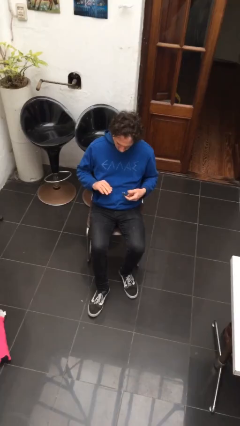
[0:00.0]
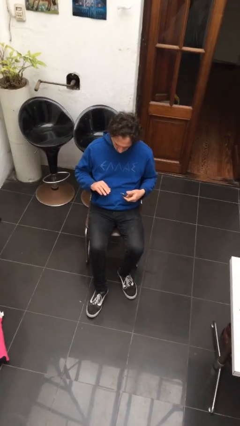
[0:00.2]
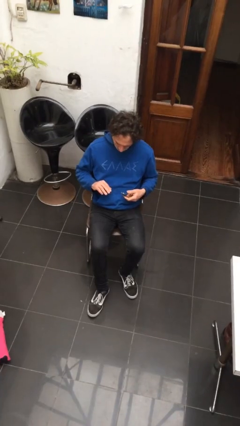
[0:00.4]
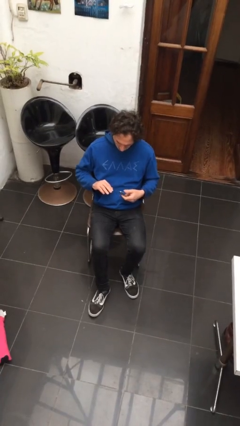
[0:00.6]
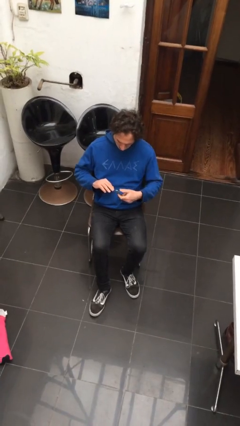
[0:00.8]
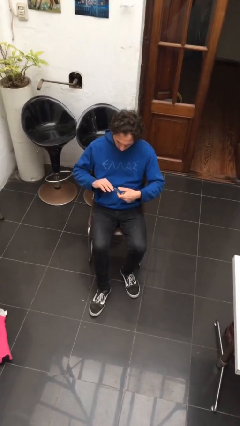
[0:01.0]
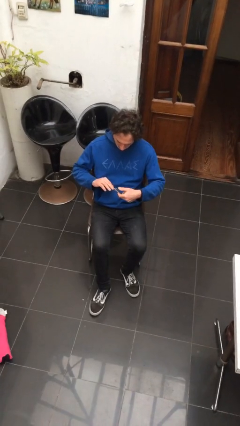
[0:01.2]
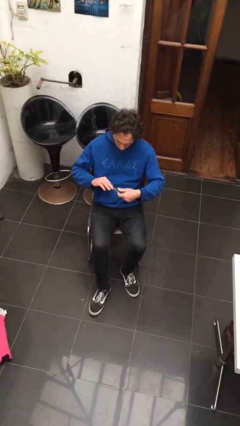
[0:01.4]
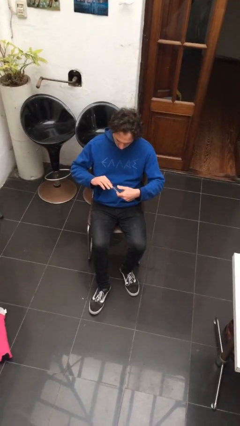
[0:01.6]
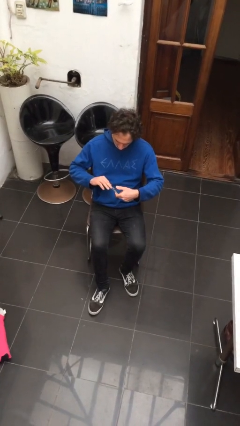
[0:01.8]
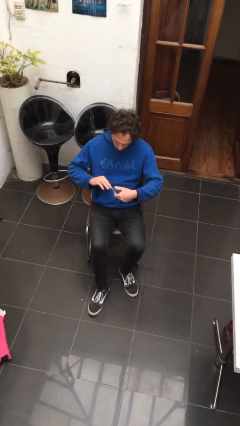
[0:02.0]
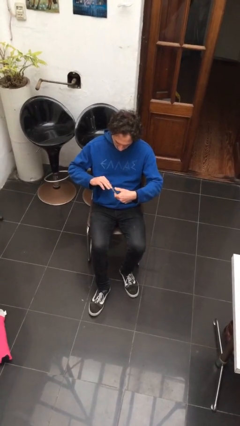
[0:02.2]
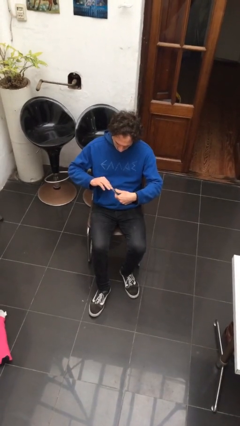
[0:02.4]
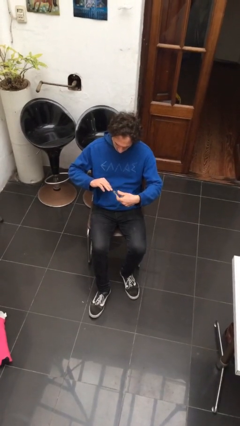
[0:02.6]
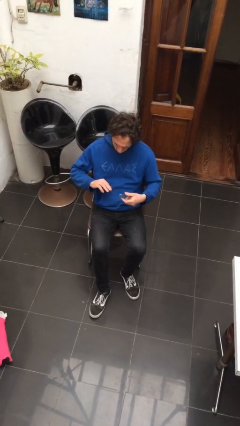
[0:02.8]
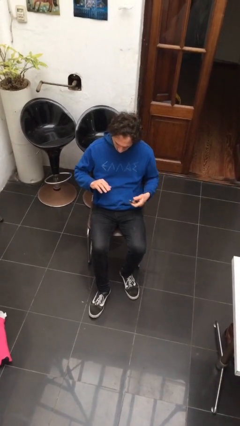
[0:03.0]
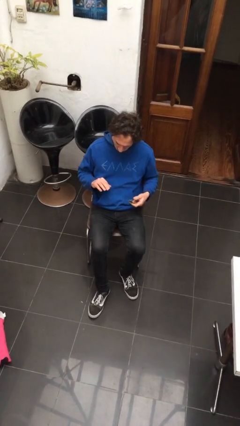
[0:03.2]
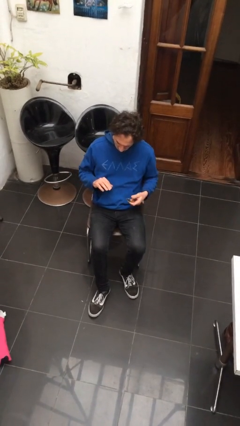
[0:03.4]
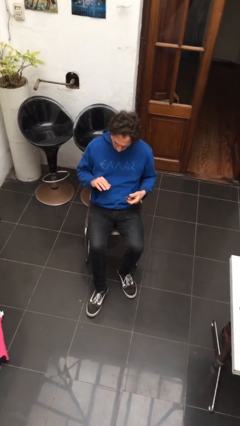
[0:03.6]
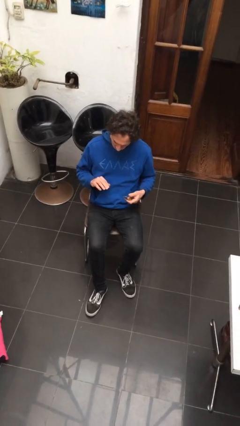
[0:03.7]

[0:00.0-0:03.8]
person clips fingernails

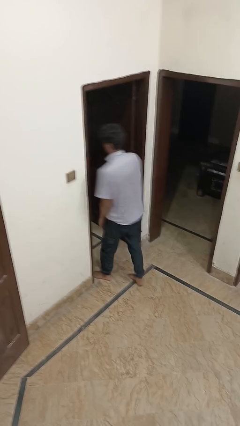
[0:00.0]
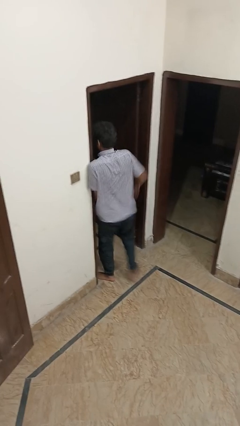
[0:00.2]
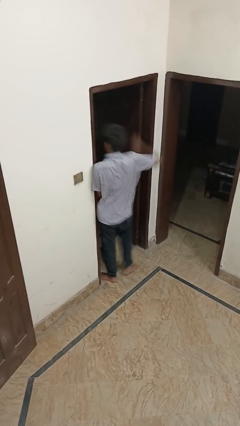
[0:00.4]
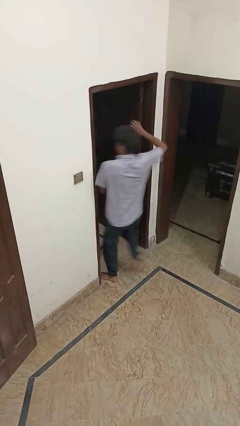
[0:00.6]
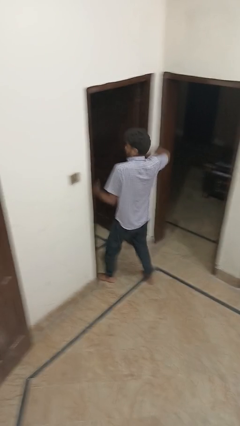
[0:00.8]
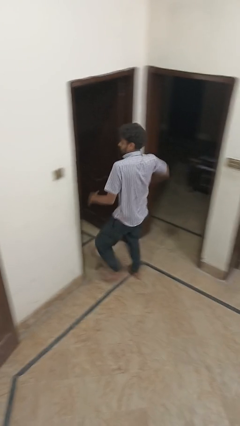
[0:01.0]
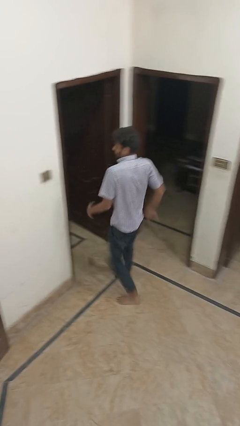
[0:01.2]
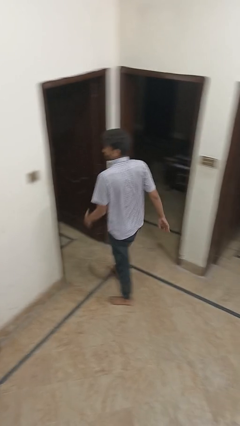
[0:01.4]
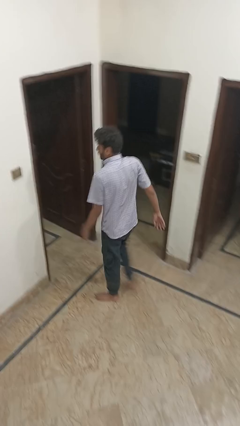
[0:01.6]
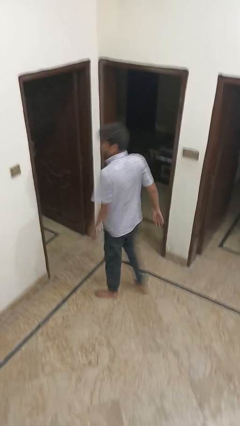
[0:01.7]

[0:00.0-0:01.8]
person bumps into wall

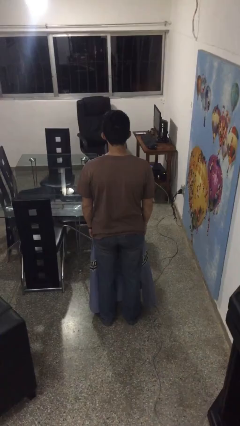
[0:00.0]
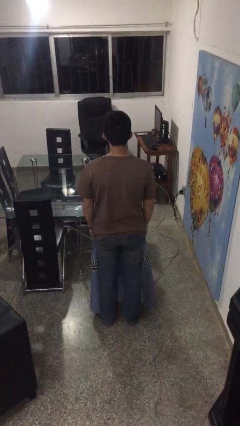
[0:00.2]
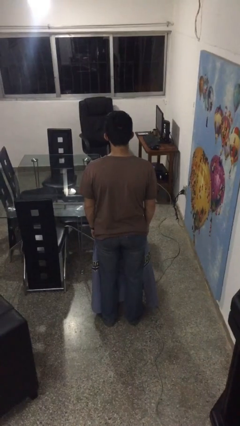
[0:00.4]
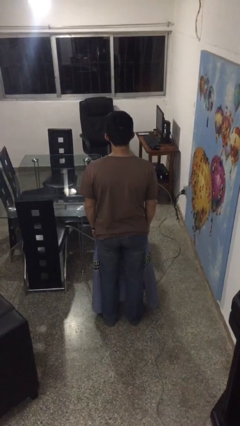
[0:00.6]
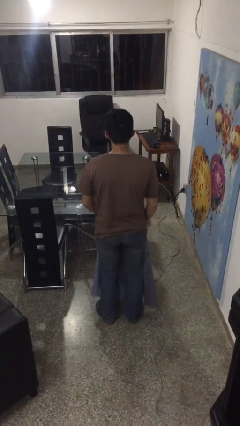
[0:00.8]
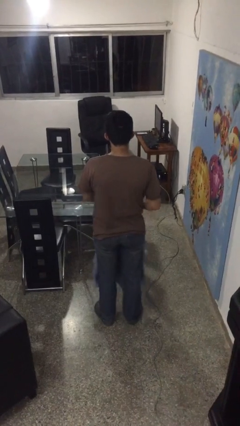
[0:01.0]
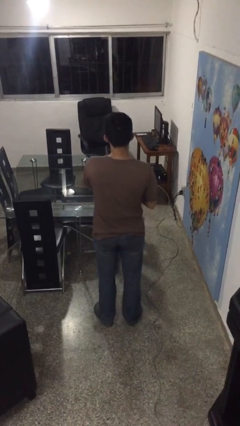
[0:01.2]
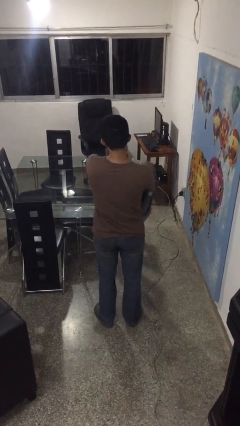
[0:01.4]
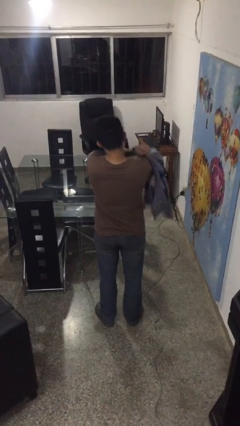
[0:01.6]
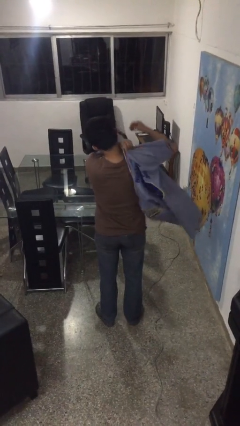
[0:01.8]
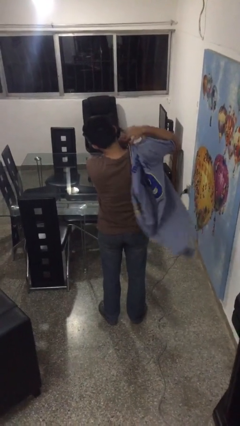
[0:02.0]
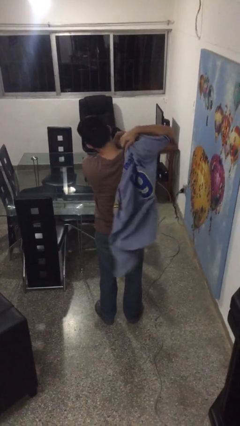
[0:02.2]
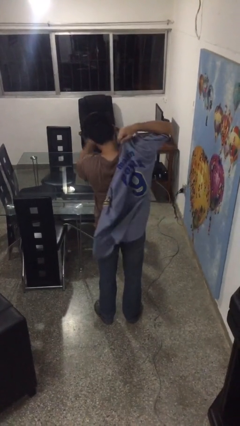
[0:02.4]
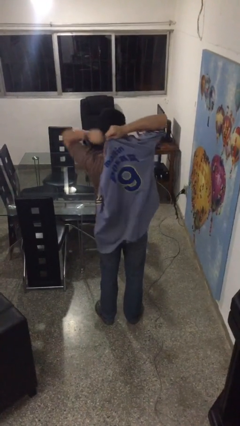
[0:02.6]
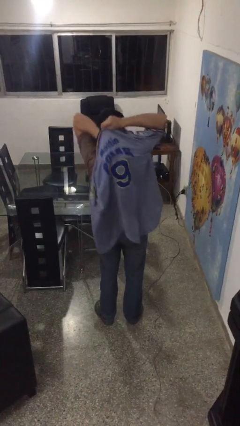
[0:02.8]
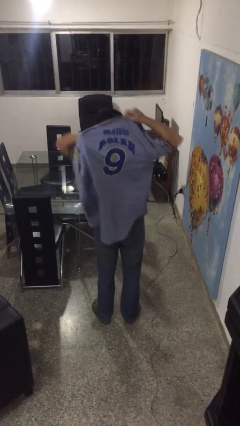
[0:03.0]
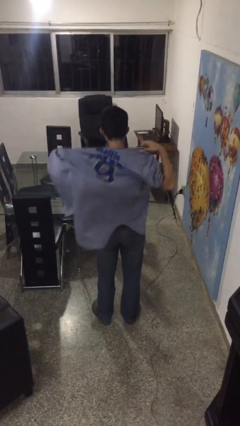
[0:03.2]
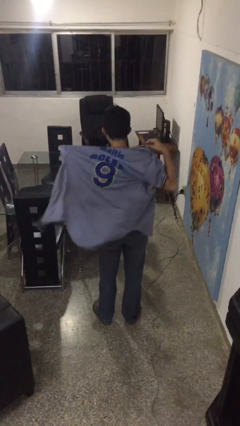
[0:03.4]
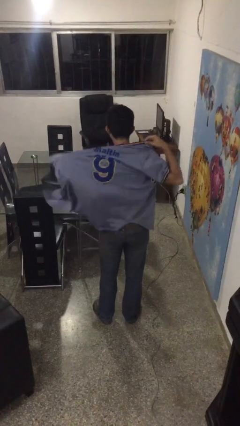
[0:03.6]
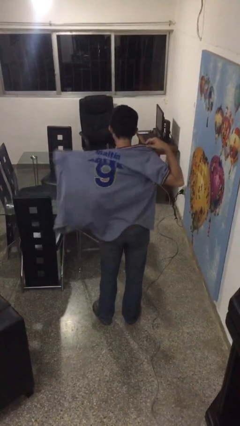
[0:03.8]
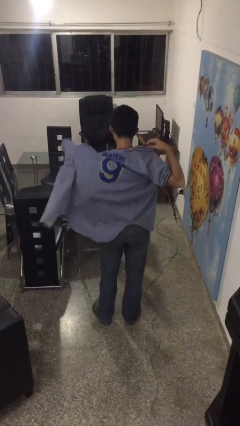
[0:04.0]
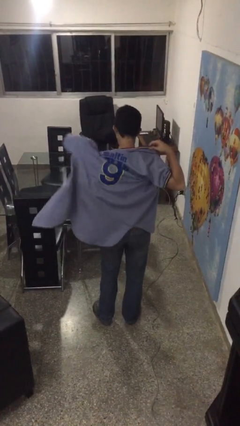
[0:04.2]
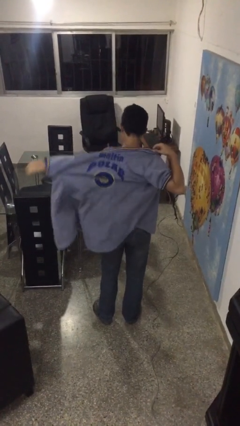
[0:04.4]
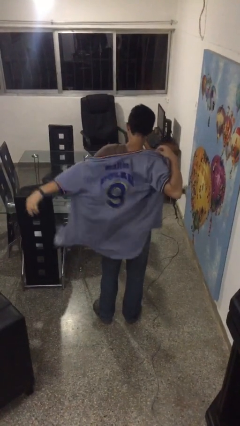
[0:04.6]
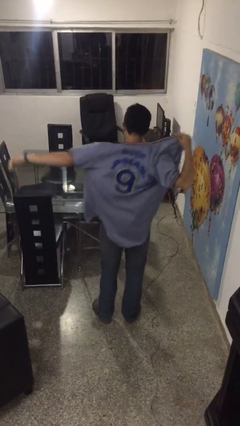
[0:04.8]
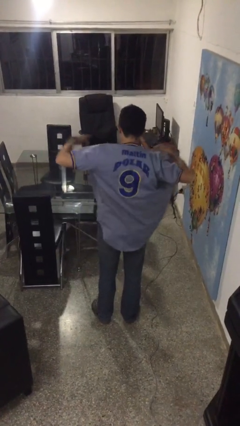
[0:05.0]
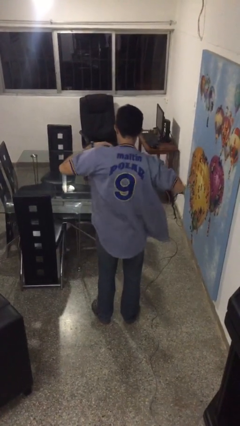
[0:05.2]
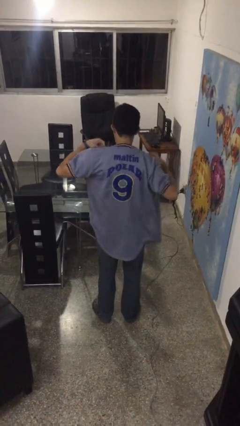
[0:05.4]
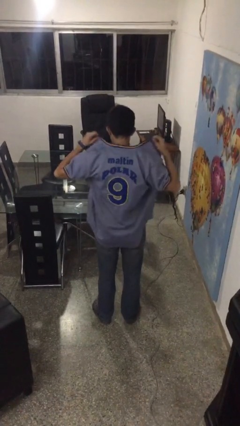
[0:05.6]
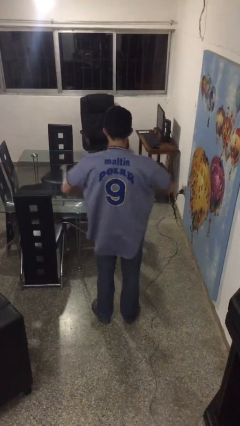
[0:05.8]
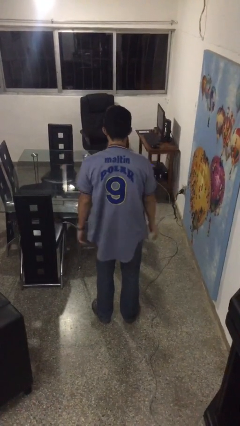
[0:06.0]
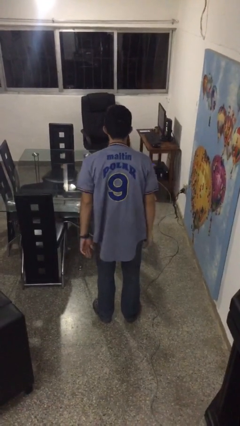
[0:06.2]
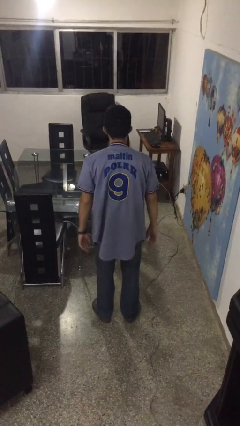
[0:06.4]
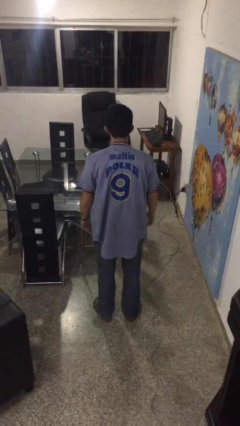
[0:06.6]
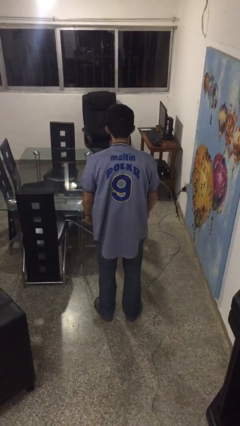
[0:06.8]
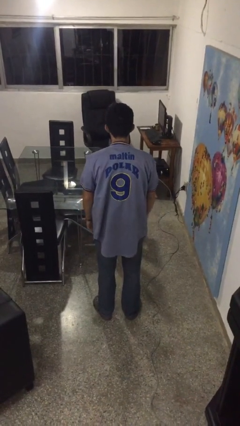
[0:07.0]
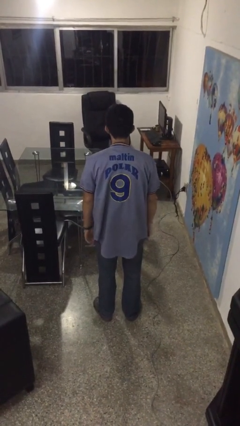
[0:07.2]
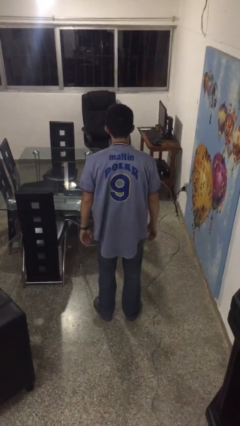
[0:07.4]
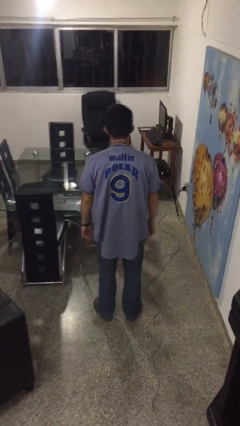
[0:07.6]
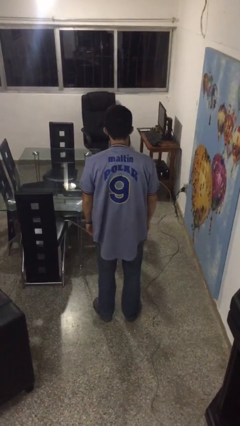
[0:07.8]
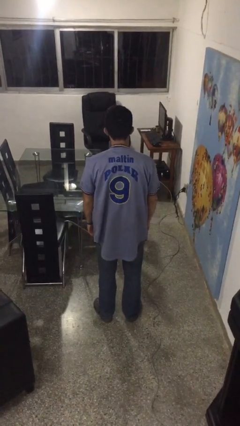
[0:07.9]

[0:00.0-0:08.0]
person puts on shirt

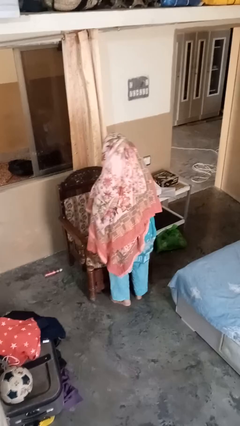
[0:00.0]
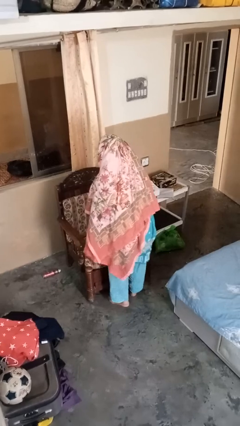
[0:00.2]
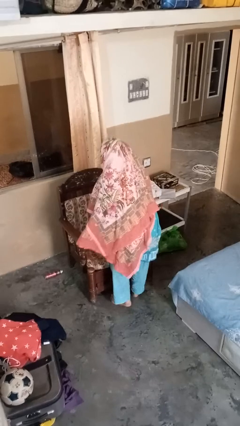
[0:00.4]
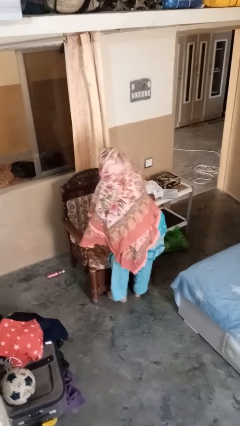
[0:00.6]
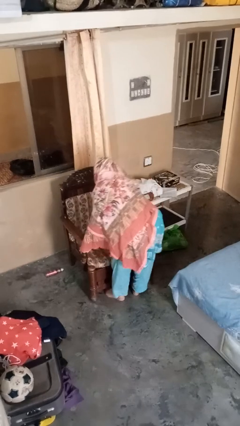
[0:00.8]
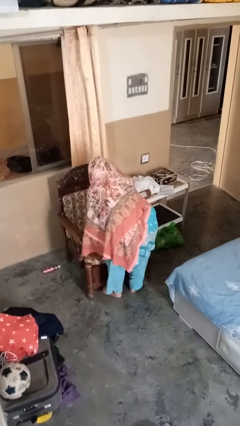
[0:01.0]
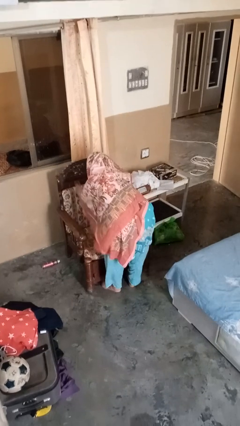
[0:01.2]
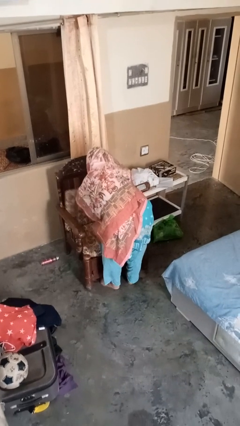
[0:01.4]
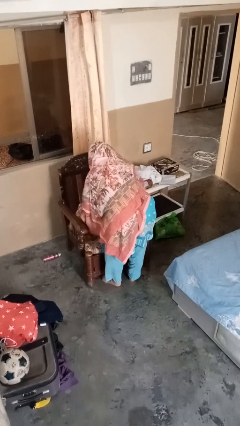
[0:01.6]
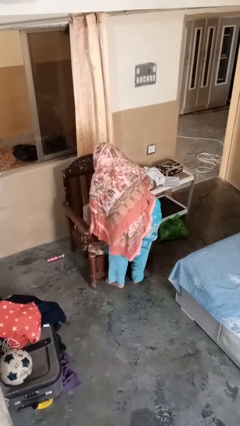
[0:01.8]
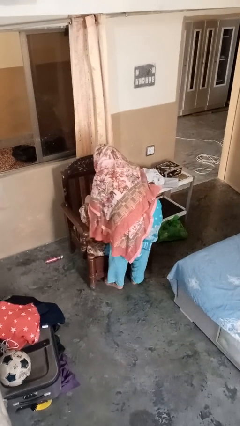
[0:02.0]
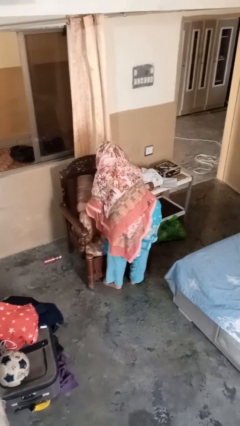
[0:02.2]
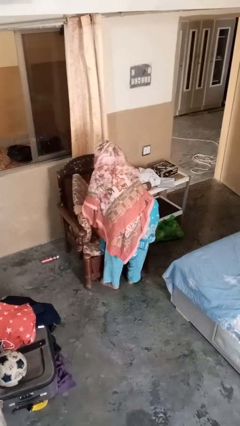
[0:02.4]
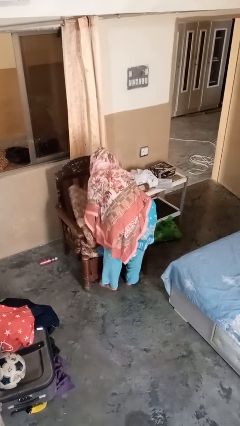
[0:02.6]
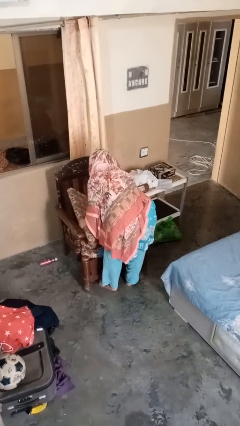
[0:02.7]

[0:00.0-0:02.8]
person searches in couch

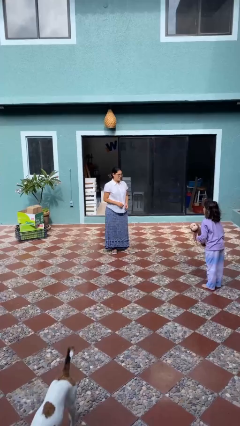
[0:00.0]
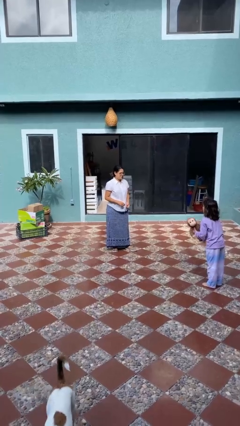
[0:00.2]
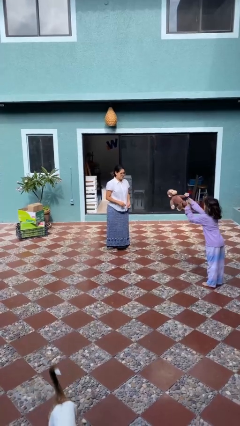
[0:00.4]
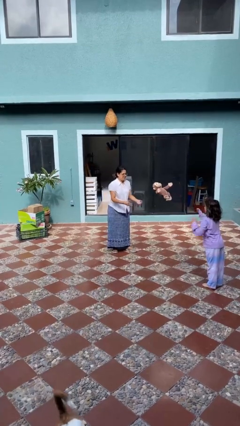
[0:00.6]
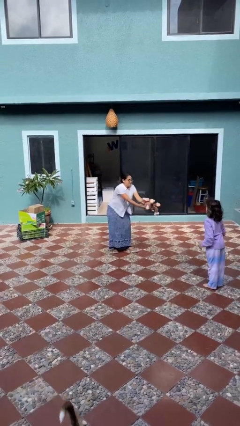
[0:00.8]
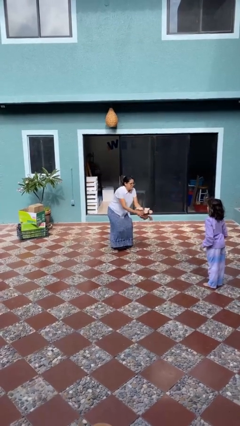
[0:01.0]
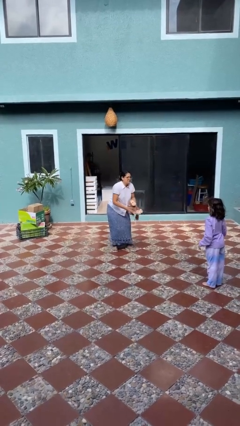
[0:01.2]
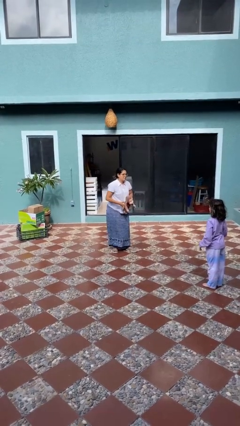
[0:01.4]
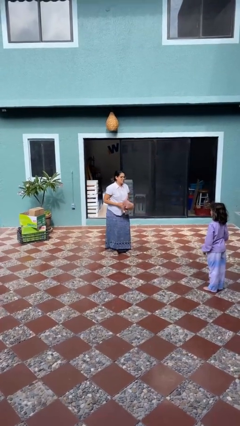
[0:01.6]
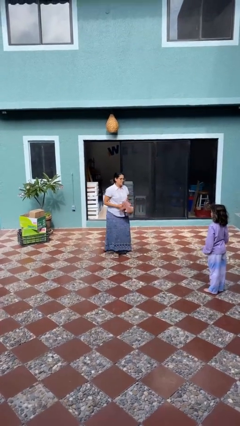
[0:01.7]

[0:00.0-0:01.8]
person catches object from person
